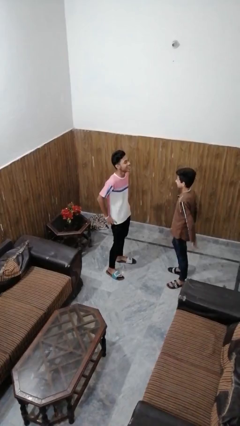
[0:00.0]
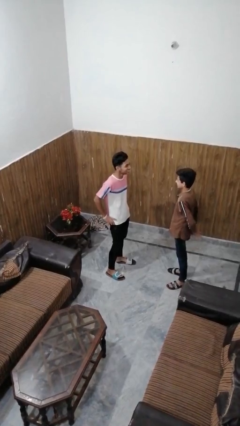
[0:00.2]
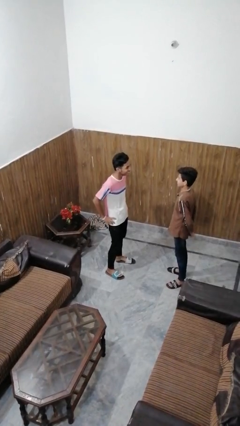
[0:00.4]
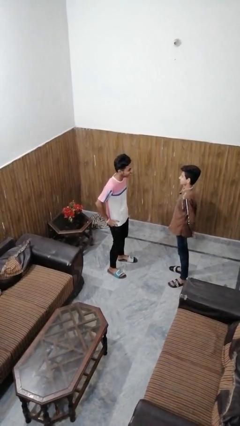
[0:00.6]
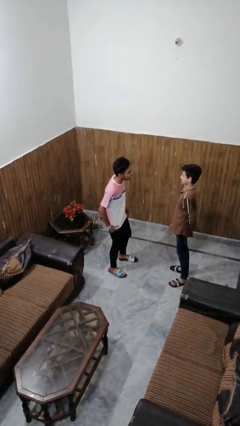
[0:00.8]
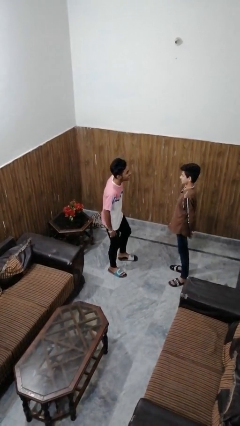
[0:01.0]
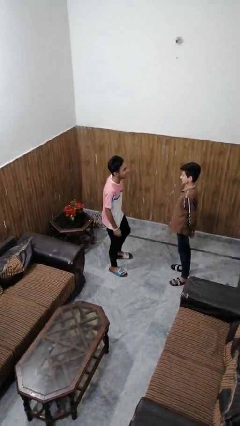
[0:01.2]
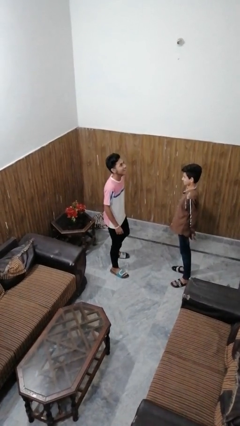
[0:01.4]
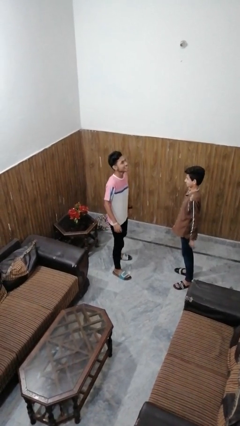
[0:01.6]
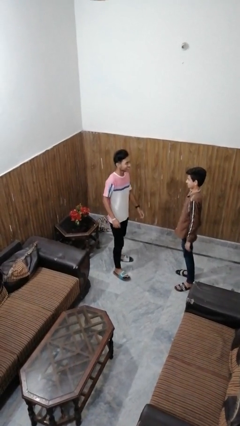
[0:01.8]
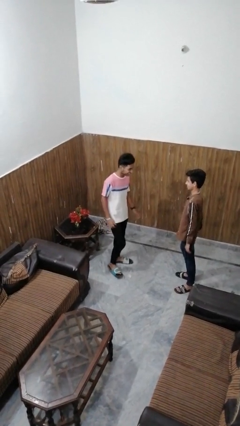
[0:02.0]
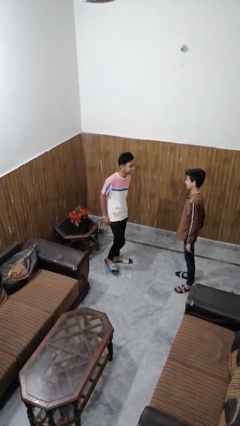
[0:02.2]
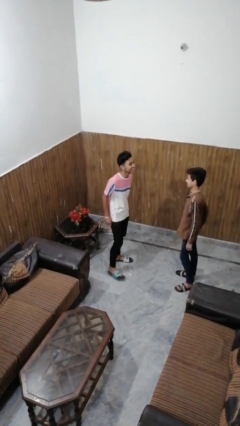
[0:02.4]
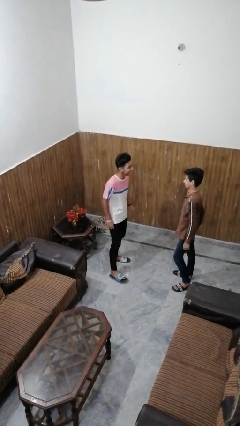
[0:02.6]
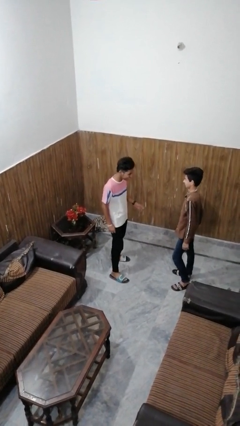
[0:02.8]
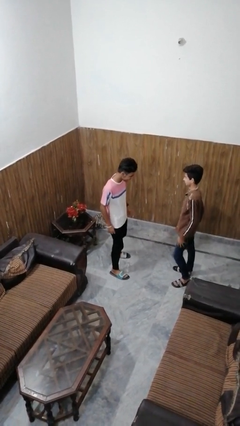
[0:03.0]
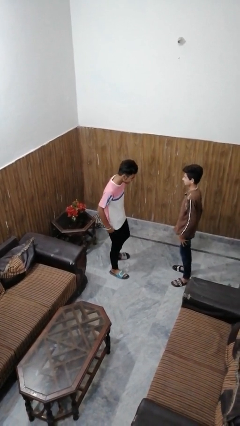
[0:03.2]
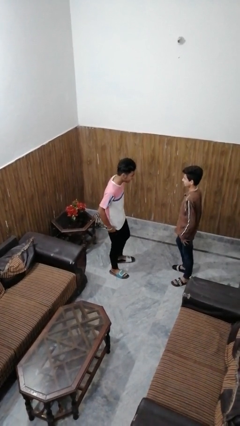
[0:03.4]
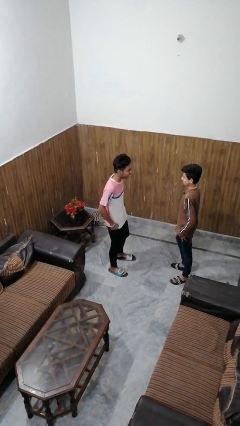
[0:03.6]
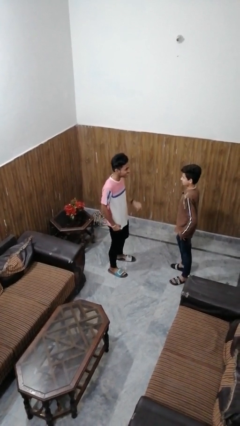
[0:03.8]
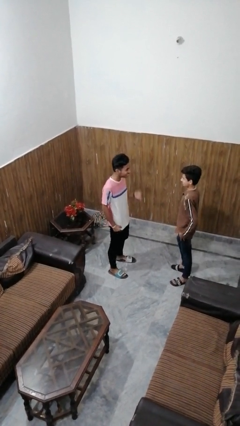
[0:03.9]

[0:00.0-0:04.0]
person laughs with person

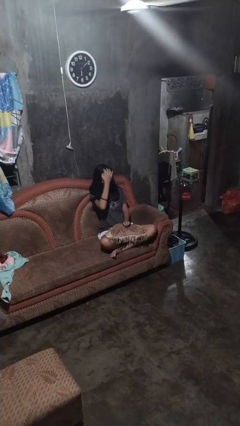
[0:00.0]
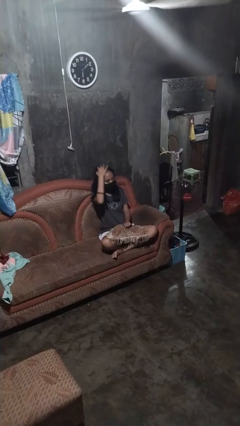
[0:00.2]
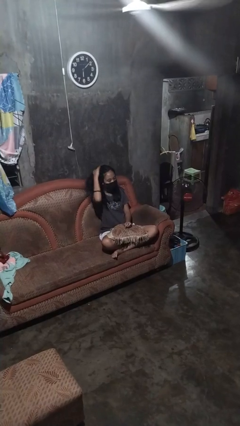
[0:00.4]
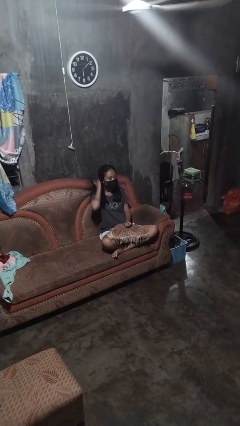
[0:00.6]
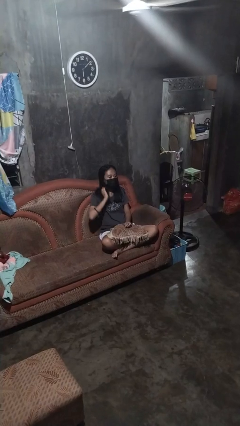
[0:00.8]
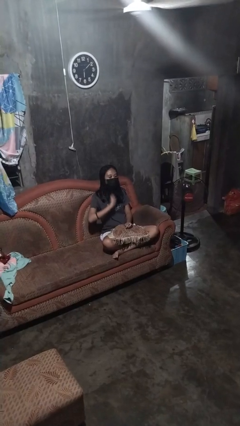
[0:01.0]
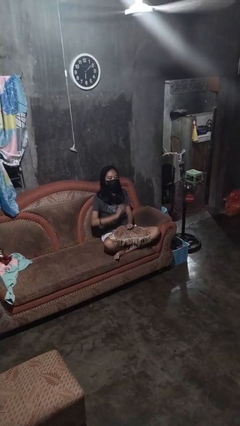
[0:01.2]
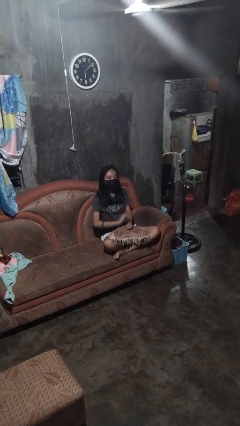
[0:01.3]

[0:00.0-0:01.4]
person strokes hair

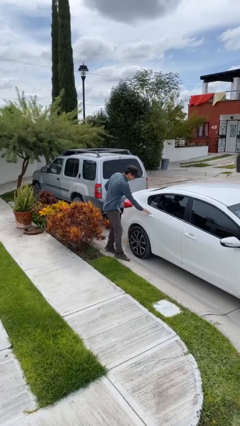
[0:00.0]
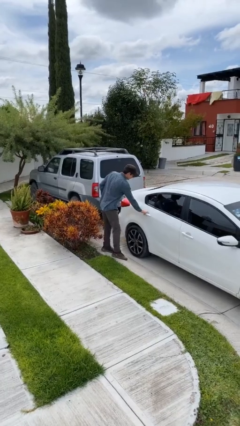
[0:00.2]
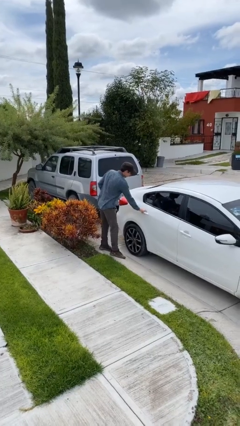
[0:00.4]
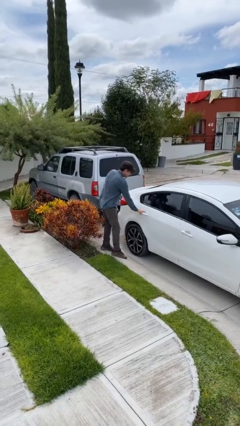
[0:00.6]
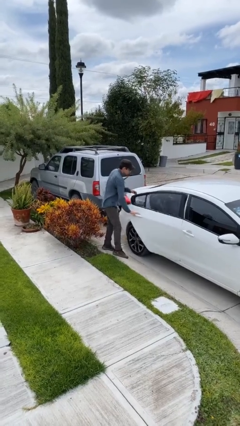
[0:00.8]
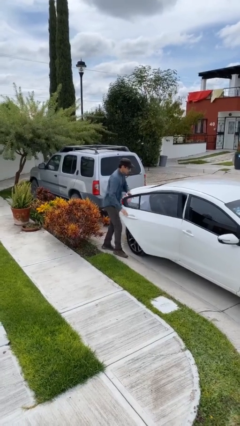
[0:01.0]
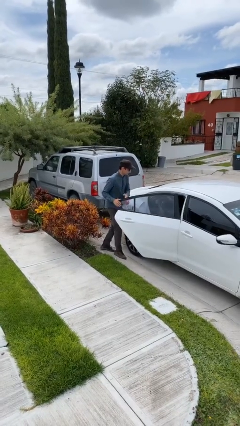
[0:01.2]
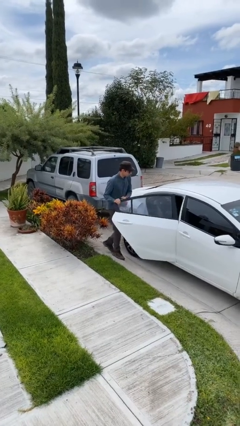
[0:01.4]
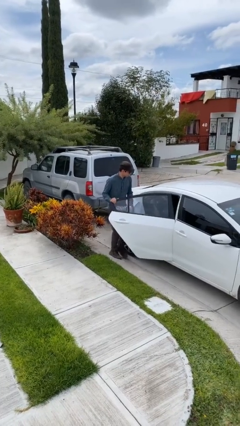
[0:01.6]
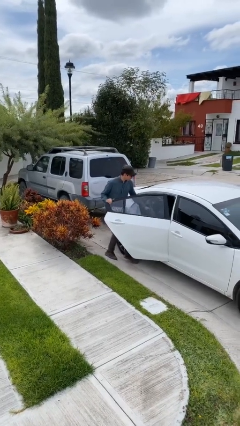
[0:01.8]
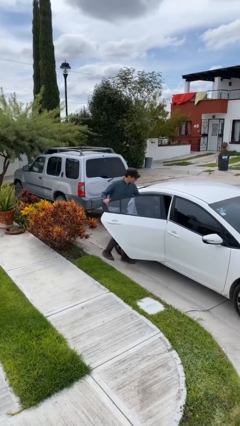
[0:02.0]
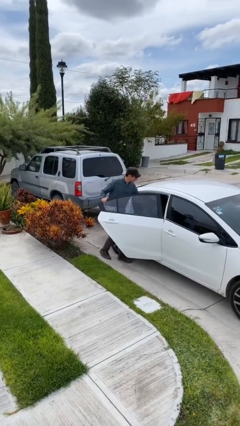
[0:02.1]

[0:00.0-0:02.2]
person opens car door

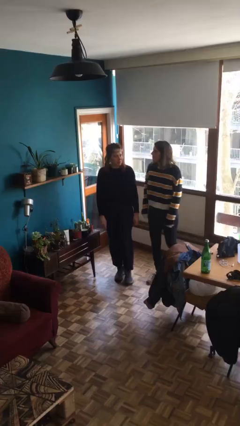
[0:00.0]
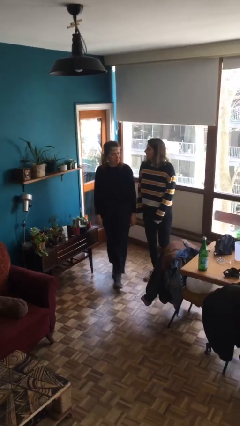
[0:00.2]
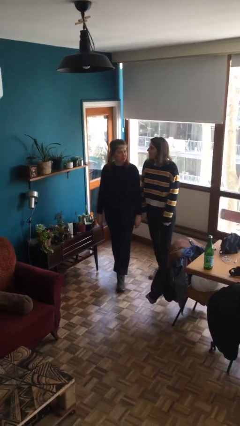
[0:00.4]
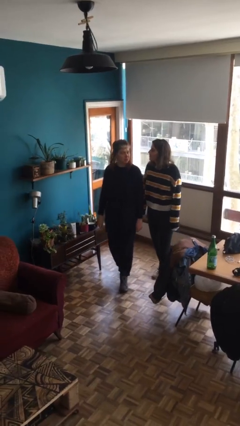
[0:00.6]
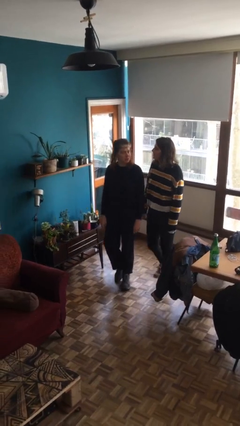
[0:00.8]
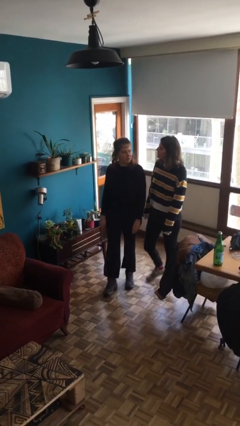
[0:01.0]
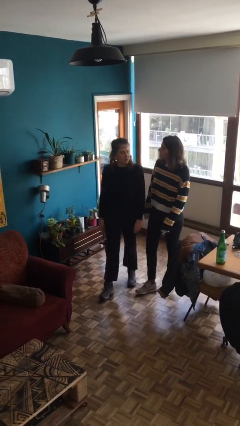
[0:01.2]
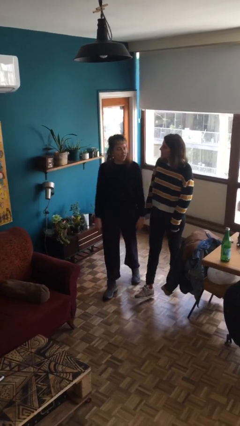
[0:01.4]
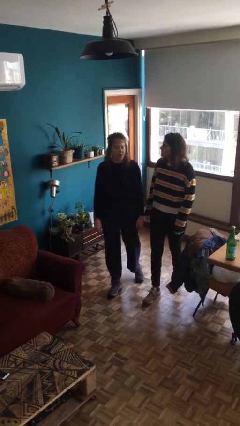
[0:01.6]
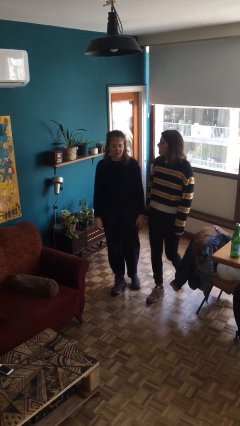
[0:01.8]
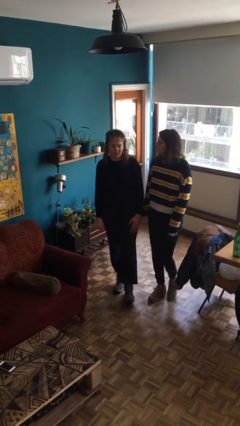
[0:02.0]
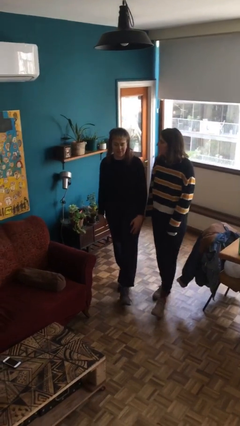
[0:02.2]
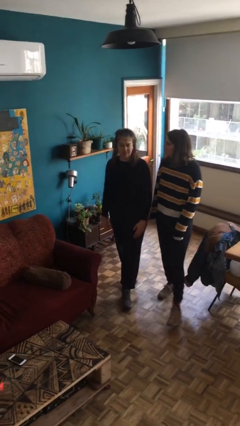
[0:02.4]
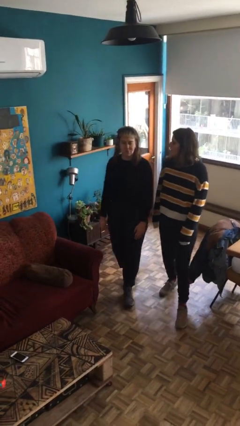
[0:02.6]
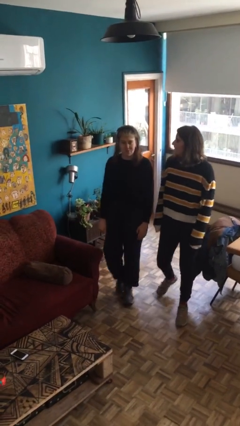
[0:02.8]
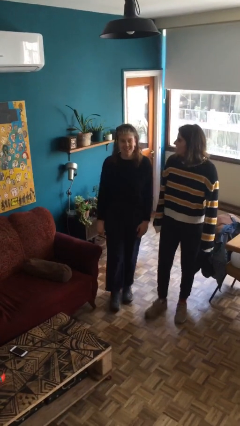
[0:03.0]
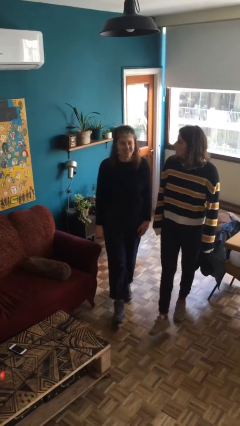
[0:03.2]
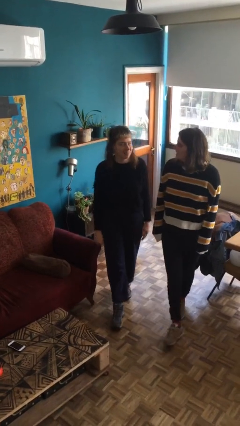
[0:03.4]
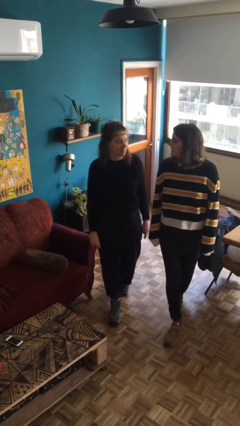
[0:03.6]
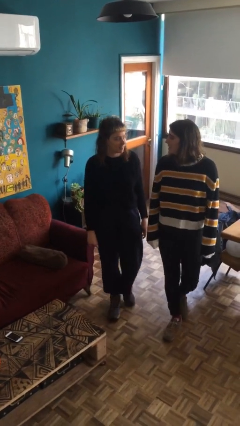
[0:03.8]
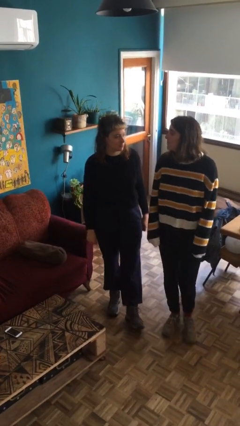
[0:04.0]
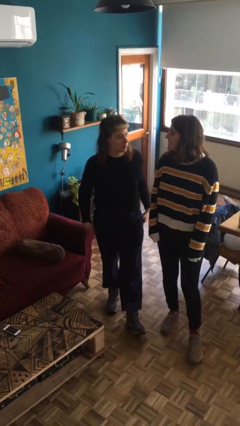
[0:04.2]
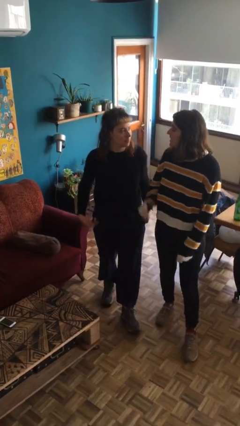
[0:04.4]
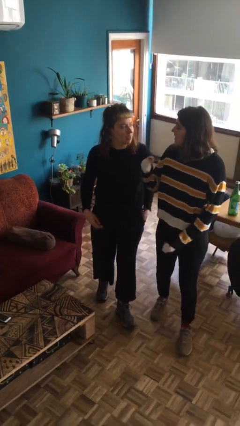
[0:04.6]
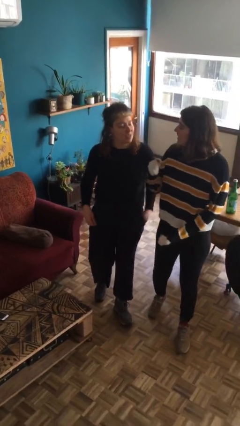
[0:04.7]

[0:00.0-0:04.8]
person talks to person

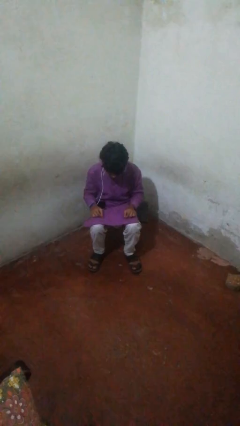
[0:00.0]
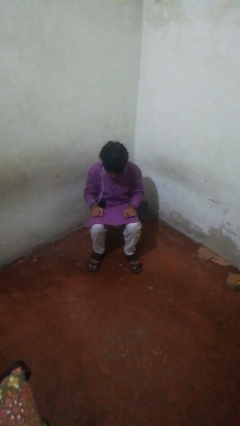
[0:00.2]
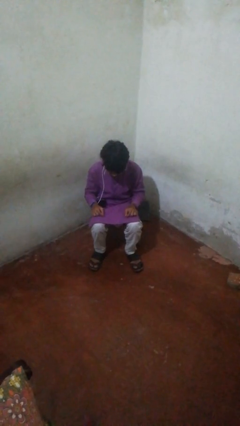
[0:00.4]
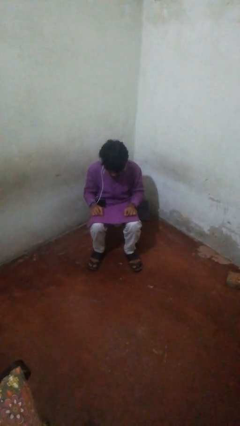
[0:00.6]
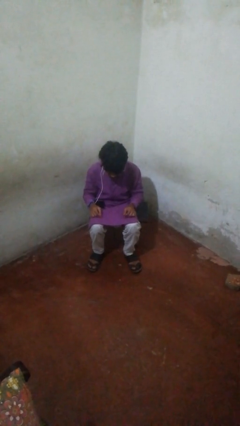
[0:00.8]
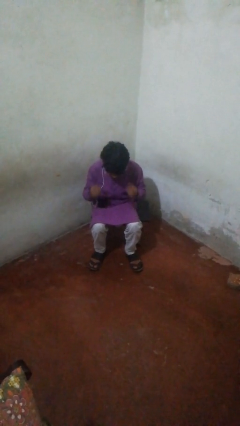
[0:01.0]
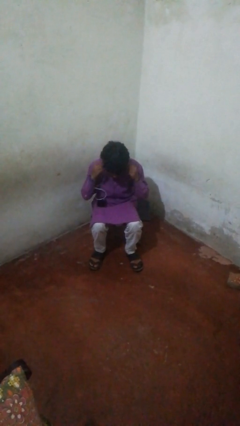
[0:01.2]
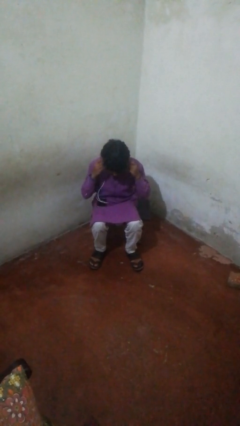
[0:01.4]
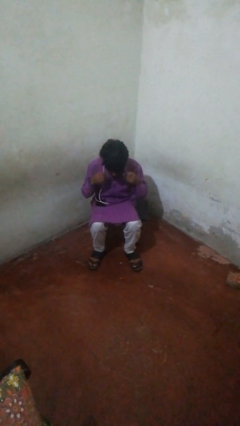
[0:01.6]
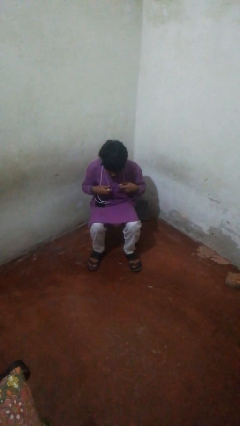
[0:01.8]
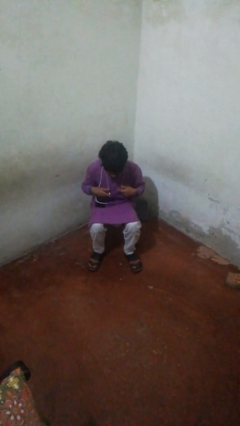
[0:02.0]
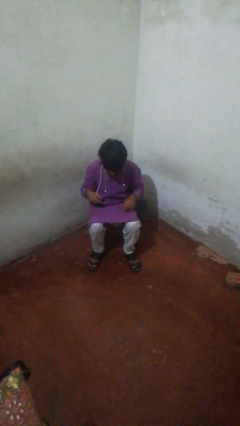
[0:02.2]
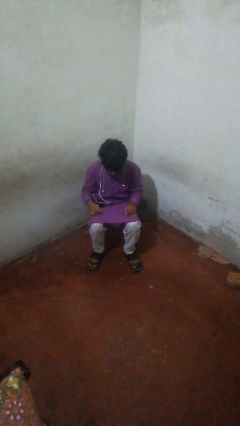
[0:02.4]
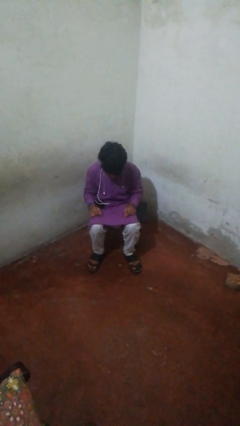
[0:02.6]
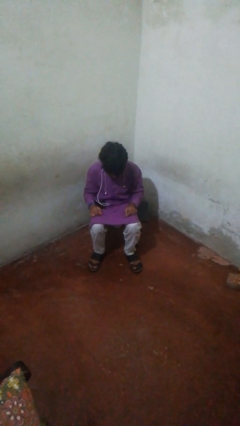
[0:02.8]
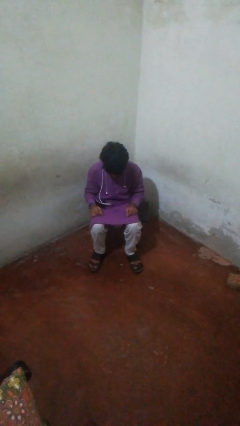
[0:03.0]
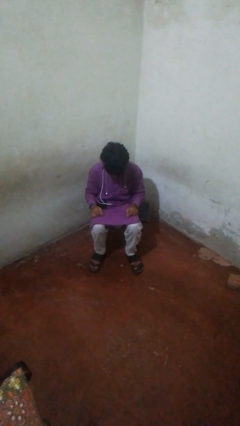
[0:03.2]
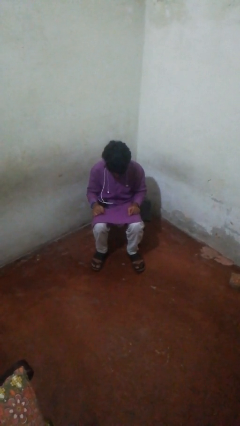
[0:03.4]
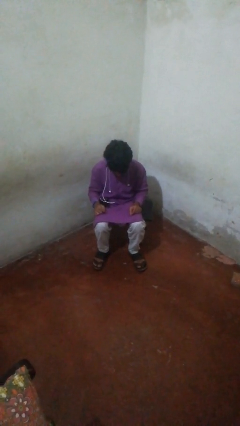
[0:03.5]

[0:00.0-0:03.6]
person takes off headphones

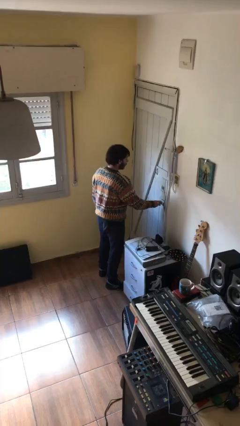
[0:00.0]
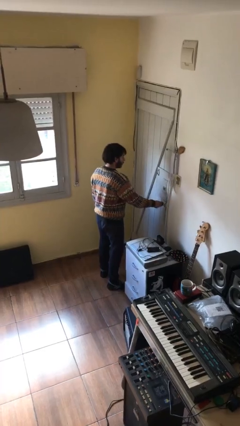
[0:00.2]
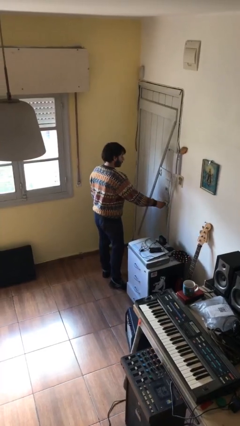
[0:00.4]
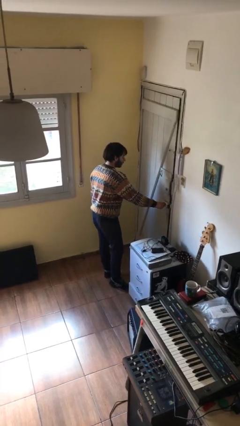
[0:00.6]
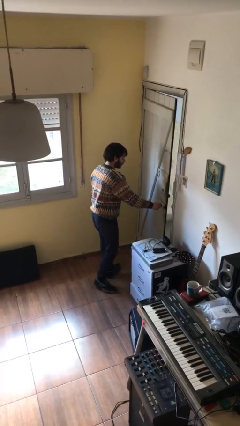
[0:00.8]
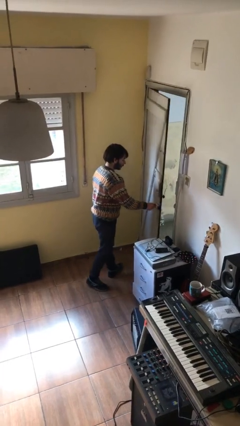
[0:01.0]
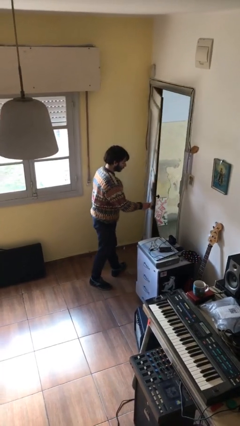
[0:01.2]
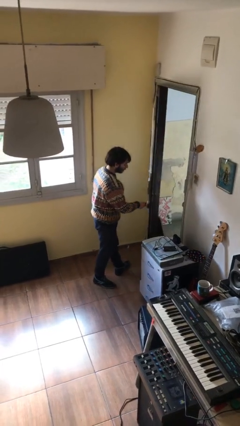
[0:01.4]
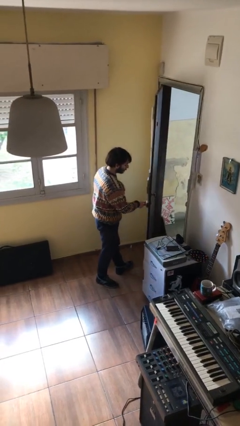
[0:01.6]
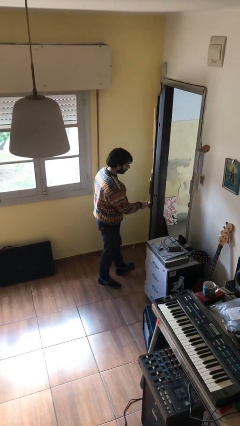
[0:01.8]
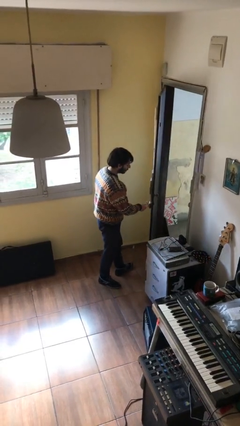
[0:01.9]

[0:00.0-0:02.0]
person opens facility door
